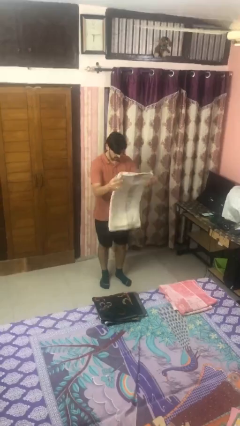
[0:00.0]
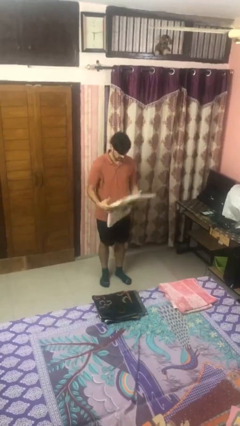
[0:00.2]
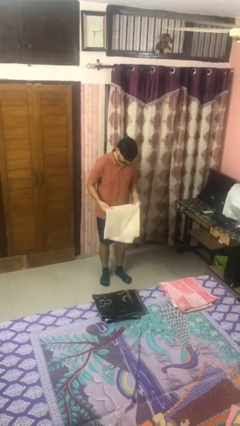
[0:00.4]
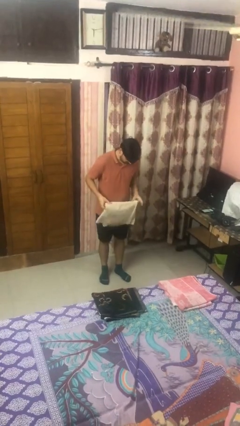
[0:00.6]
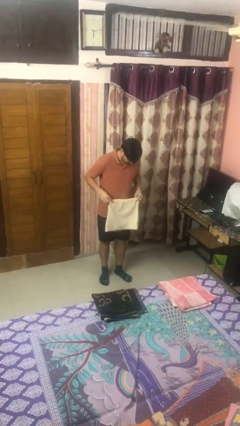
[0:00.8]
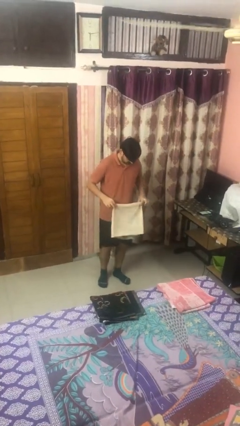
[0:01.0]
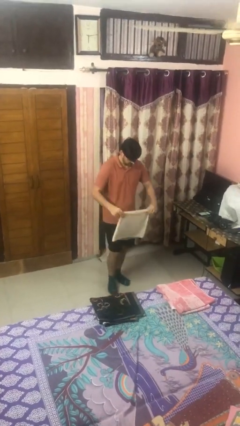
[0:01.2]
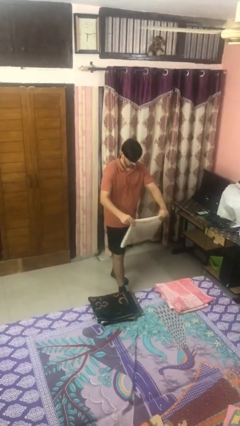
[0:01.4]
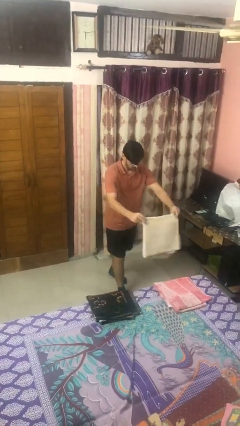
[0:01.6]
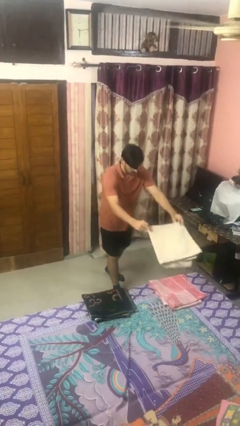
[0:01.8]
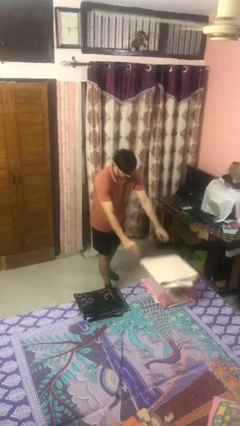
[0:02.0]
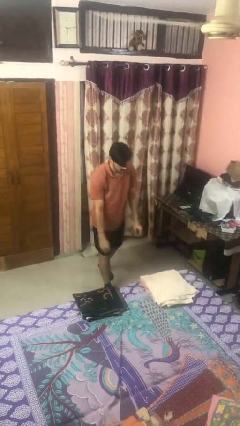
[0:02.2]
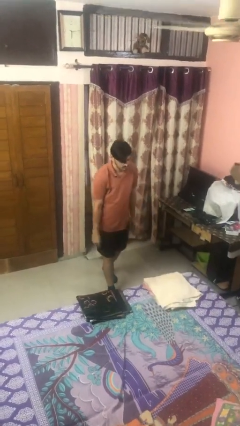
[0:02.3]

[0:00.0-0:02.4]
person folds towel

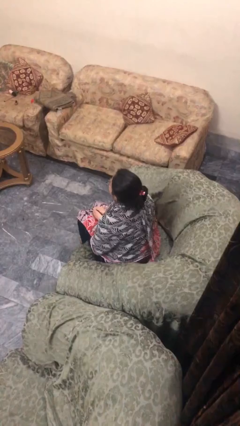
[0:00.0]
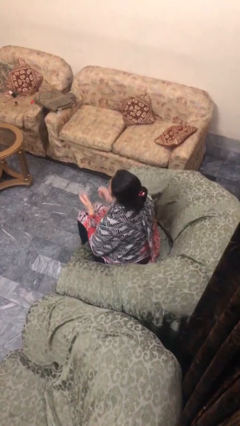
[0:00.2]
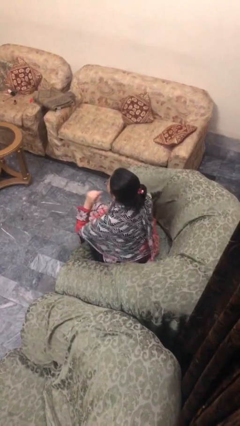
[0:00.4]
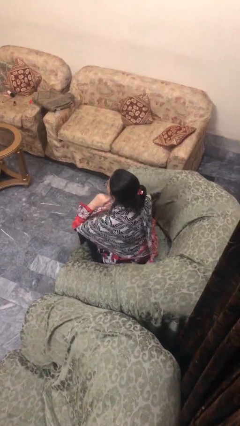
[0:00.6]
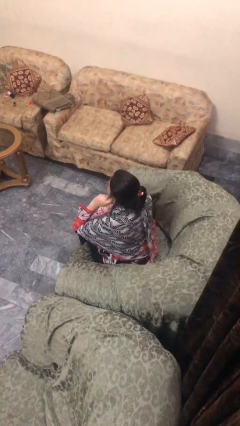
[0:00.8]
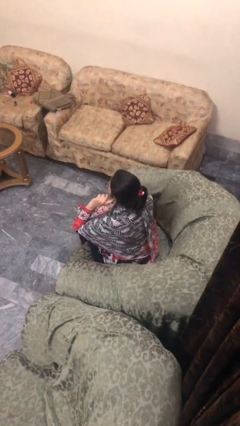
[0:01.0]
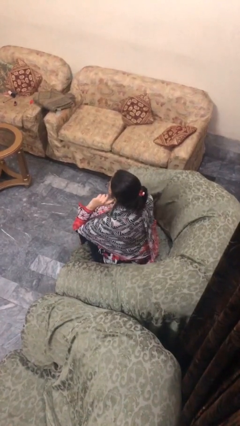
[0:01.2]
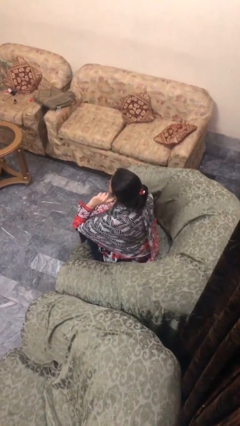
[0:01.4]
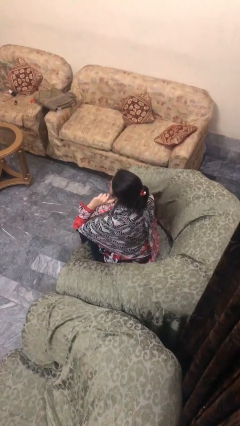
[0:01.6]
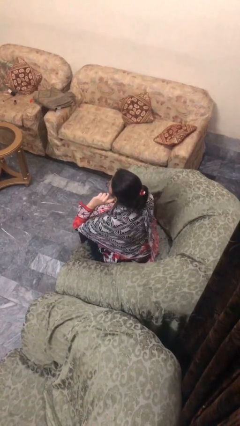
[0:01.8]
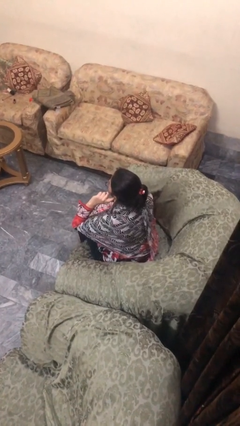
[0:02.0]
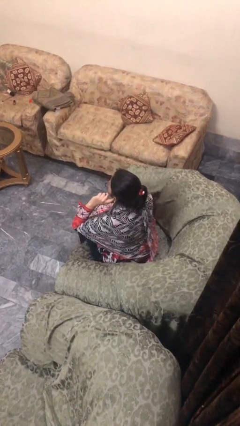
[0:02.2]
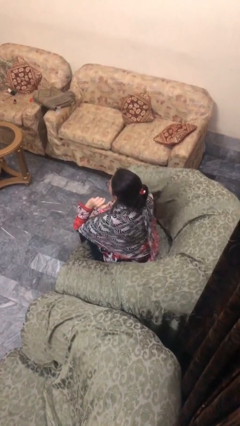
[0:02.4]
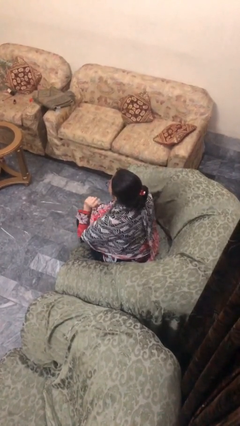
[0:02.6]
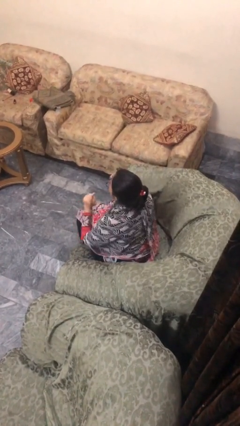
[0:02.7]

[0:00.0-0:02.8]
person puts fingers in ear

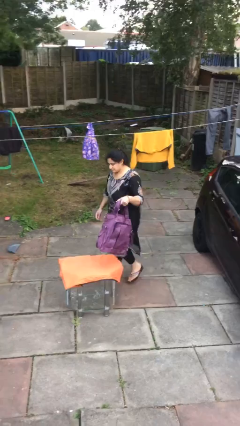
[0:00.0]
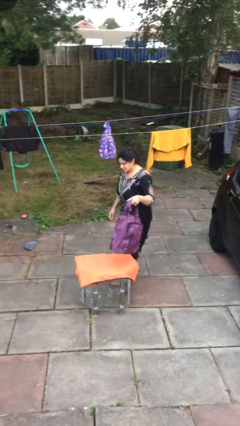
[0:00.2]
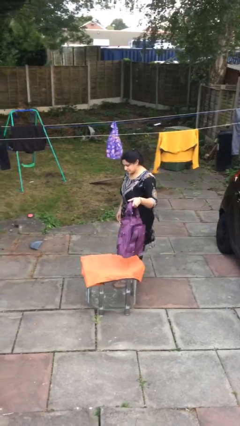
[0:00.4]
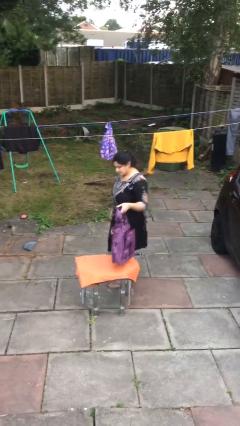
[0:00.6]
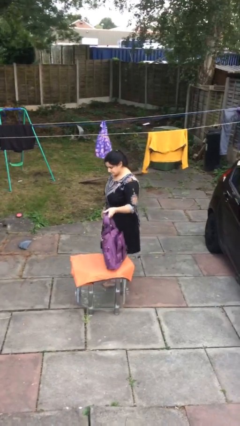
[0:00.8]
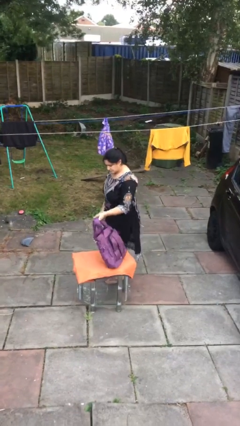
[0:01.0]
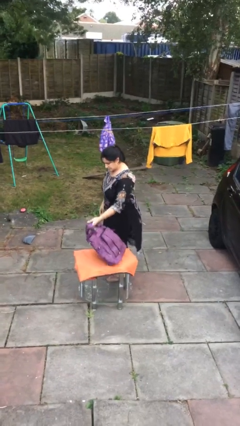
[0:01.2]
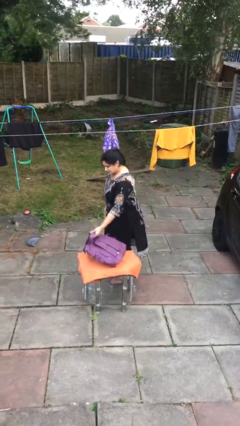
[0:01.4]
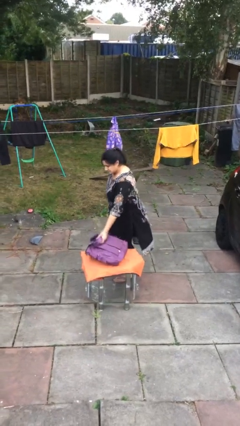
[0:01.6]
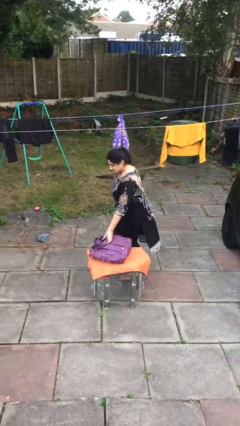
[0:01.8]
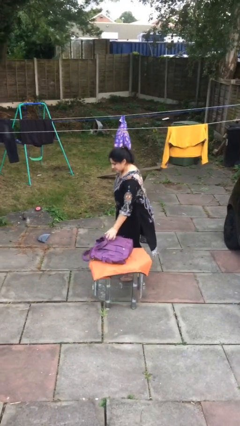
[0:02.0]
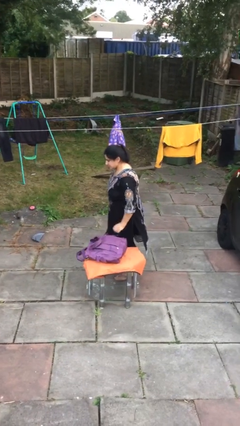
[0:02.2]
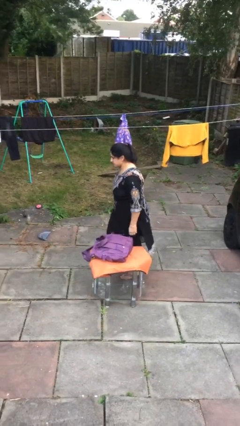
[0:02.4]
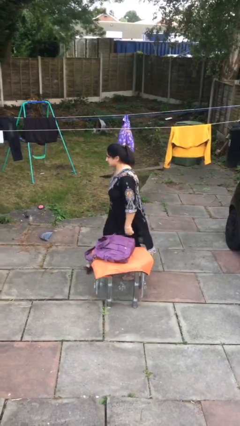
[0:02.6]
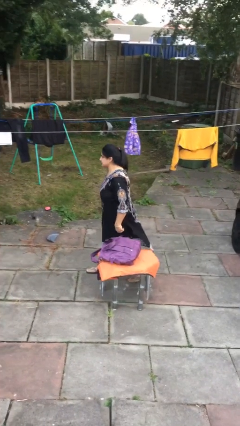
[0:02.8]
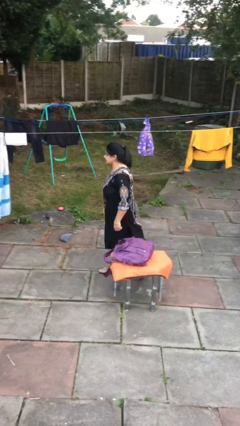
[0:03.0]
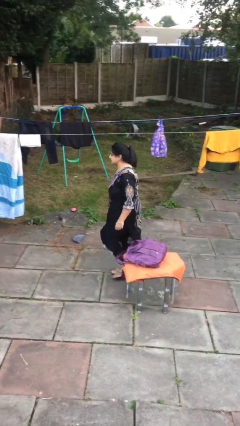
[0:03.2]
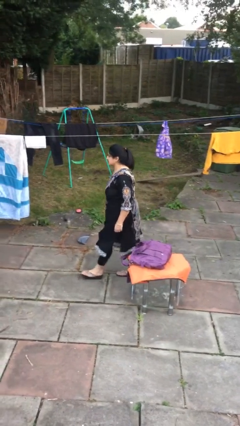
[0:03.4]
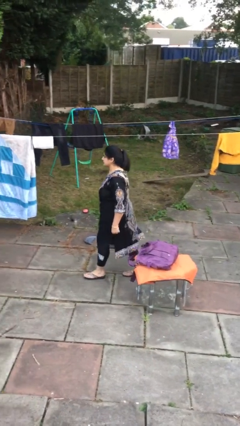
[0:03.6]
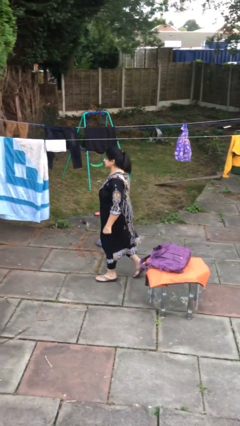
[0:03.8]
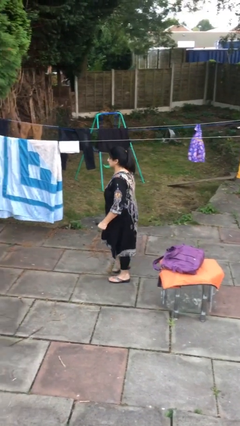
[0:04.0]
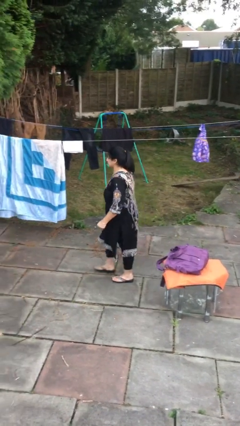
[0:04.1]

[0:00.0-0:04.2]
person puts down object on table

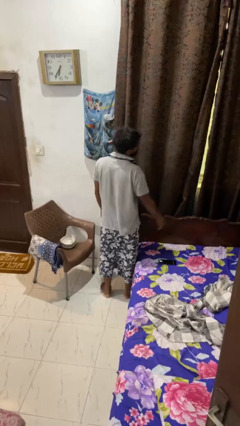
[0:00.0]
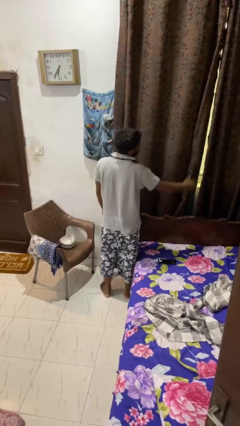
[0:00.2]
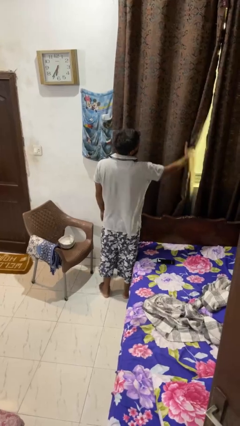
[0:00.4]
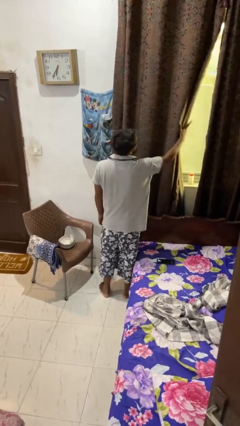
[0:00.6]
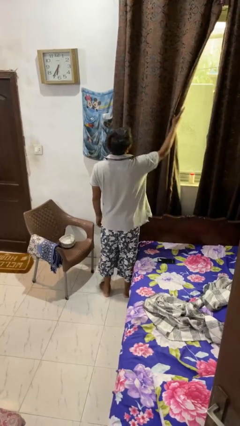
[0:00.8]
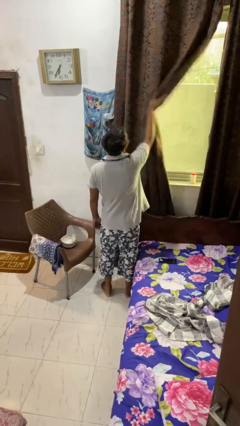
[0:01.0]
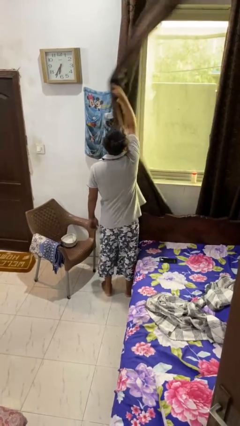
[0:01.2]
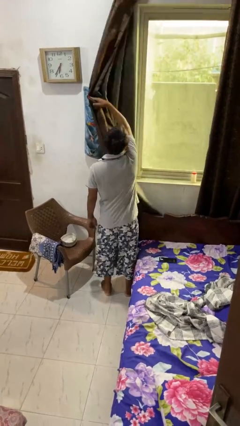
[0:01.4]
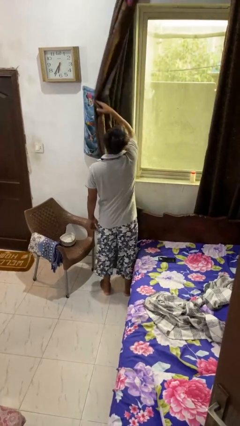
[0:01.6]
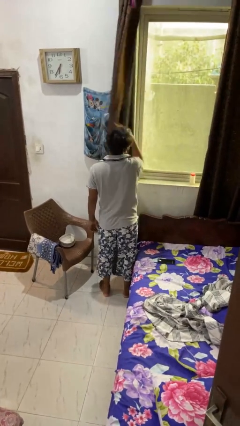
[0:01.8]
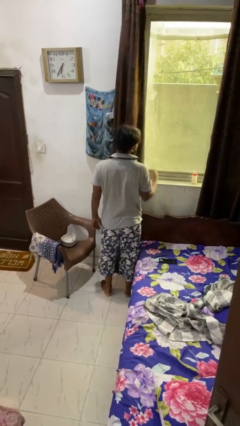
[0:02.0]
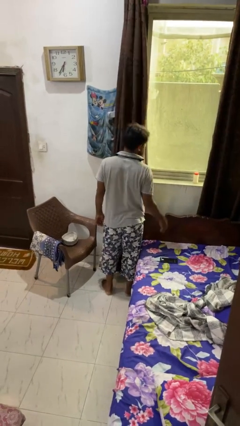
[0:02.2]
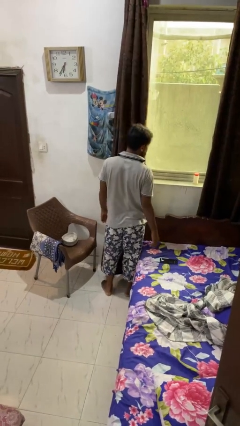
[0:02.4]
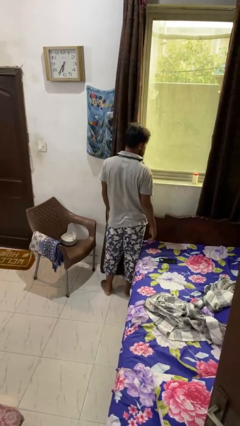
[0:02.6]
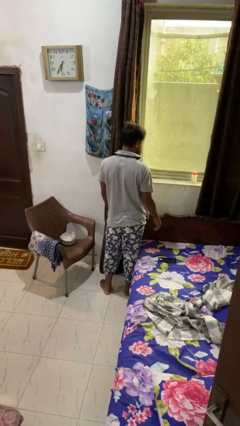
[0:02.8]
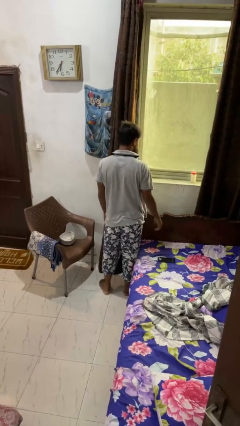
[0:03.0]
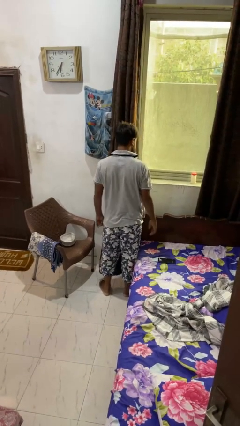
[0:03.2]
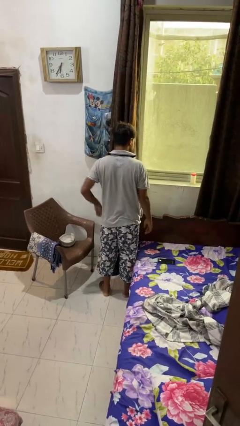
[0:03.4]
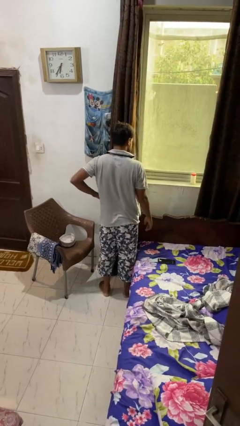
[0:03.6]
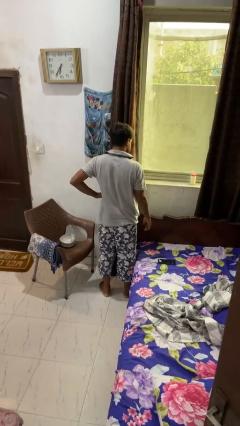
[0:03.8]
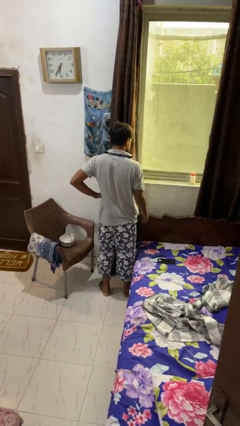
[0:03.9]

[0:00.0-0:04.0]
person opens curtains

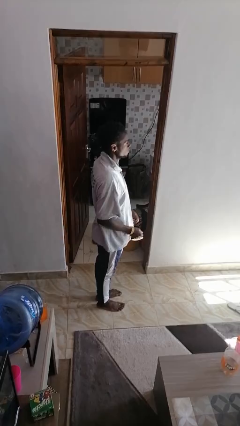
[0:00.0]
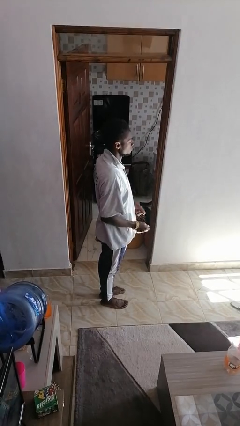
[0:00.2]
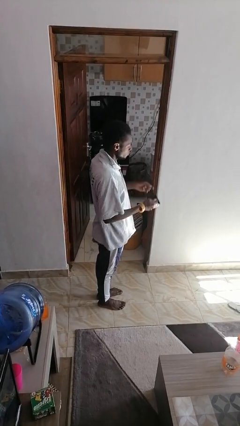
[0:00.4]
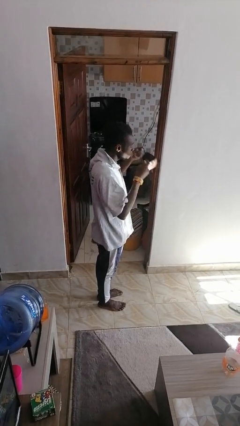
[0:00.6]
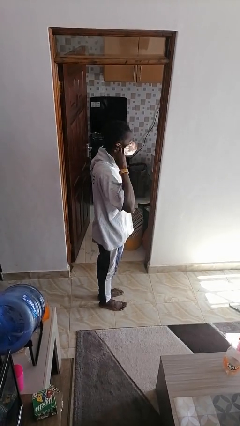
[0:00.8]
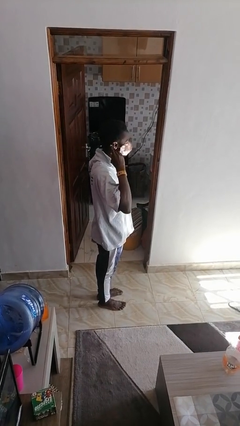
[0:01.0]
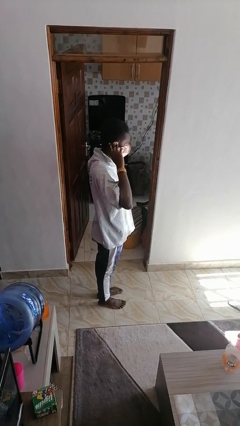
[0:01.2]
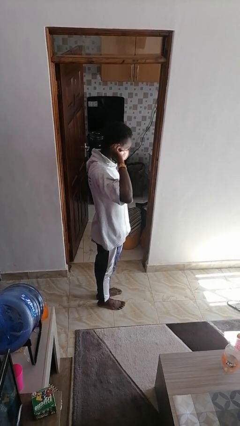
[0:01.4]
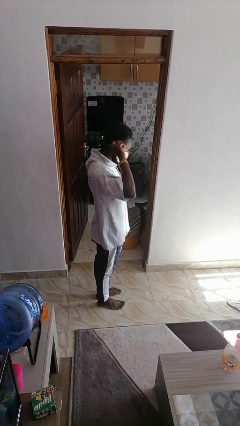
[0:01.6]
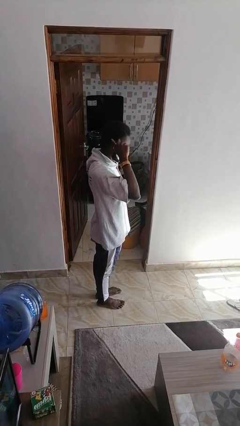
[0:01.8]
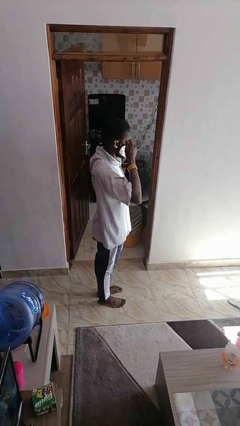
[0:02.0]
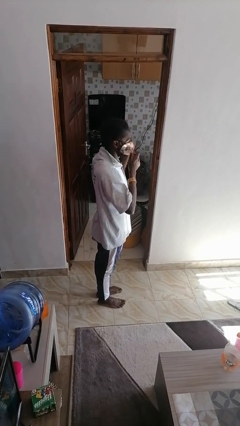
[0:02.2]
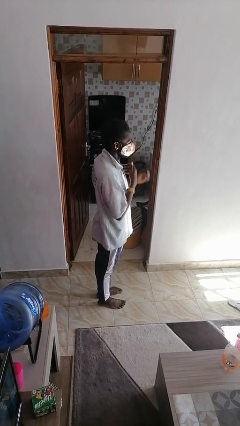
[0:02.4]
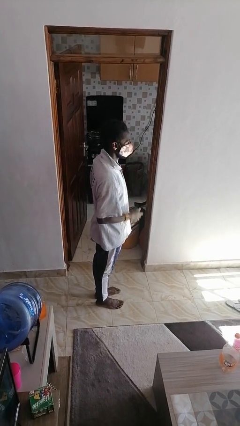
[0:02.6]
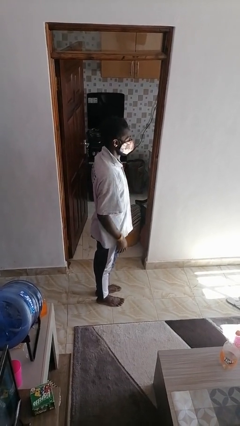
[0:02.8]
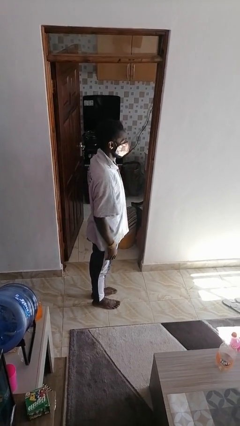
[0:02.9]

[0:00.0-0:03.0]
person puts on facemask

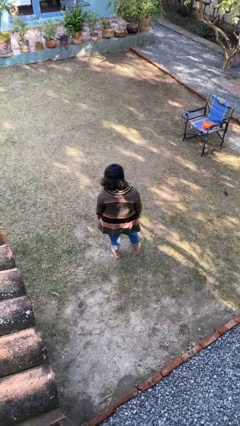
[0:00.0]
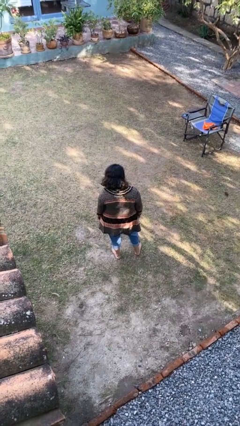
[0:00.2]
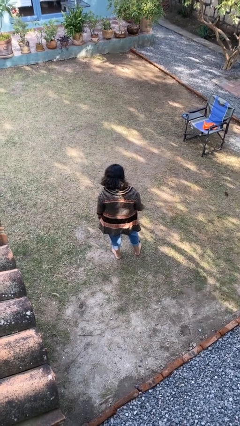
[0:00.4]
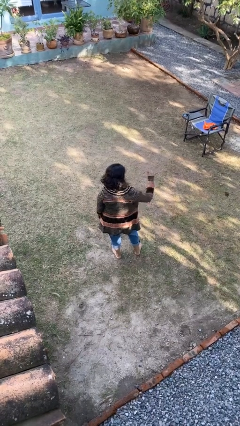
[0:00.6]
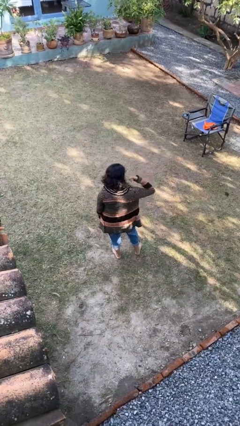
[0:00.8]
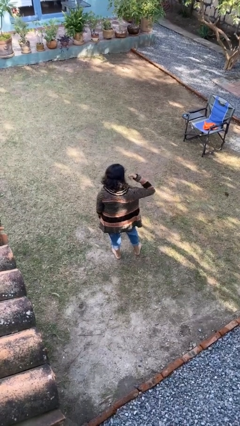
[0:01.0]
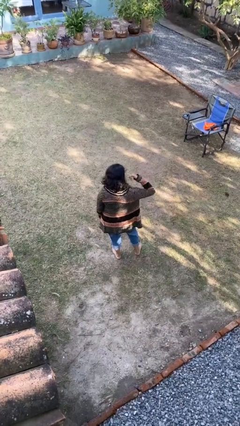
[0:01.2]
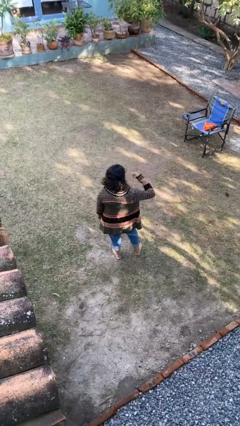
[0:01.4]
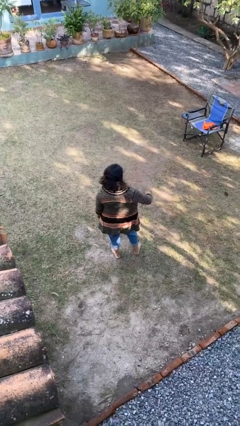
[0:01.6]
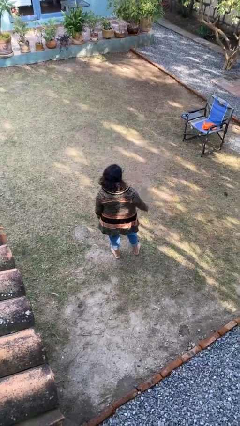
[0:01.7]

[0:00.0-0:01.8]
person gestures call me
